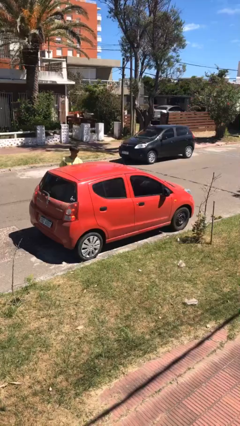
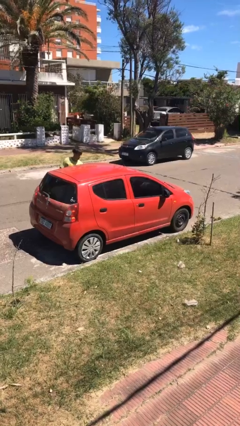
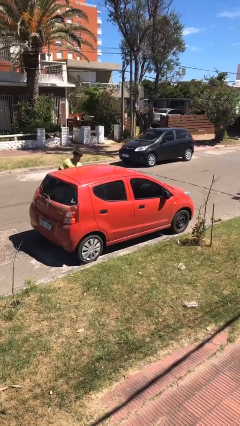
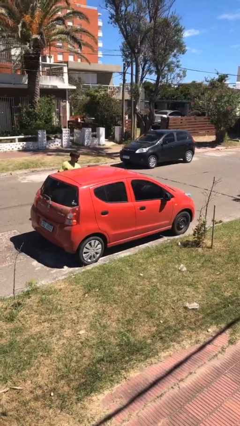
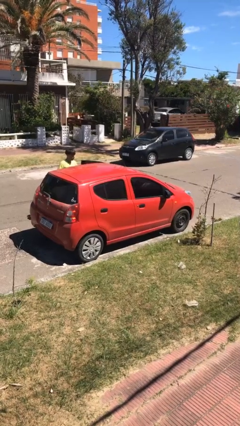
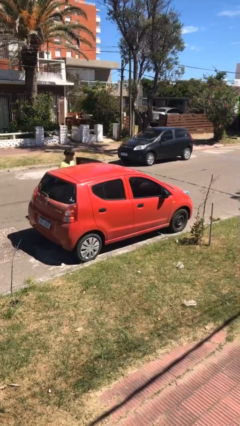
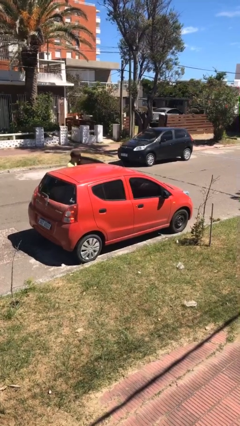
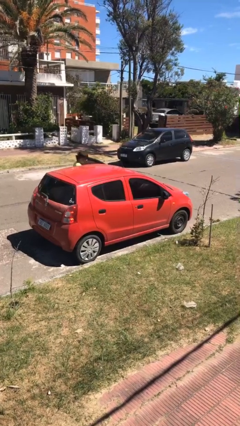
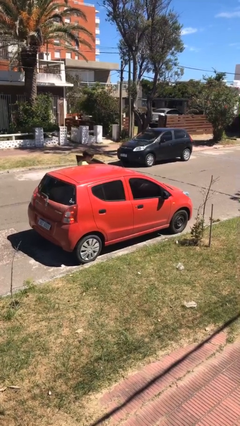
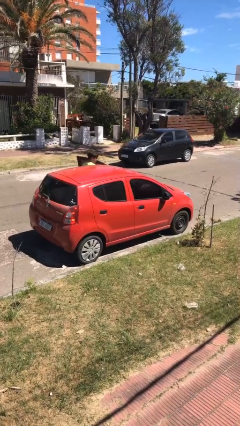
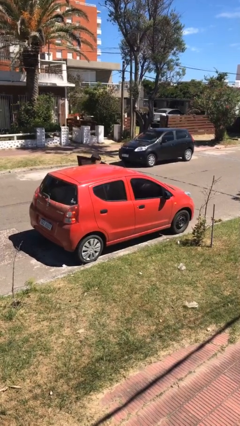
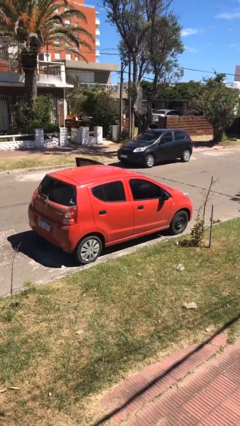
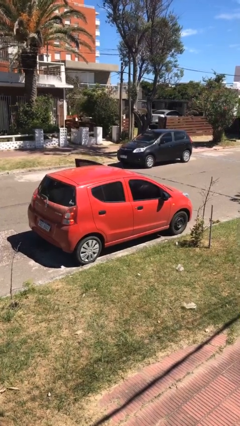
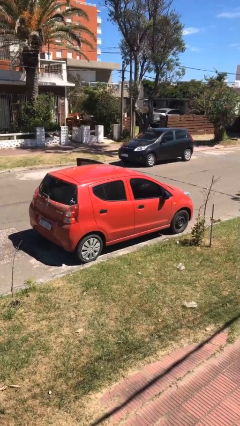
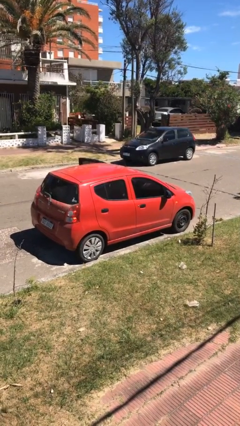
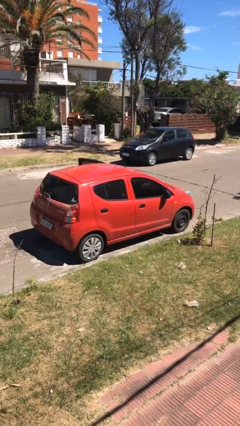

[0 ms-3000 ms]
car picks up person

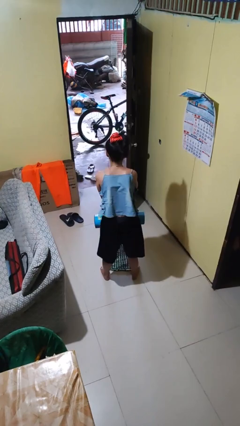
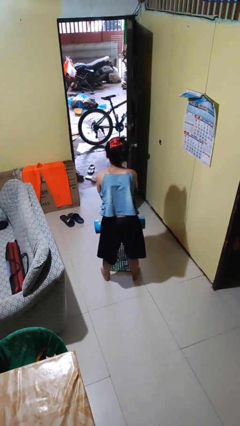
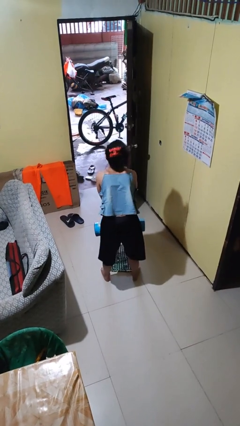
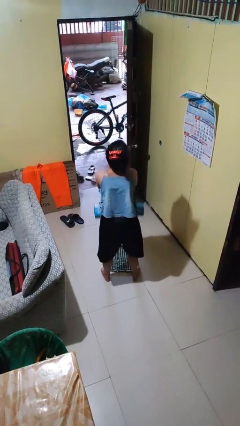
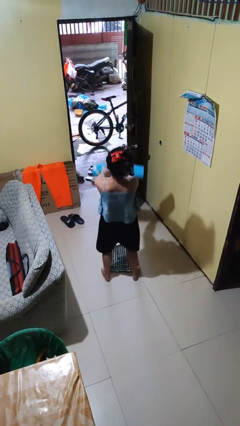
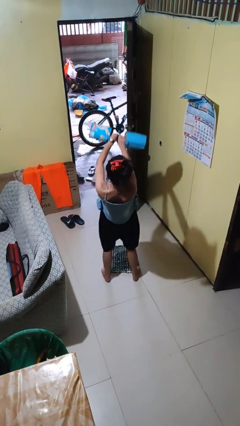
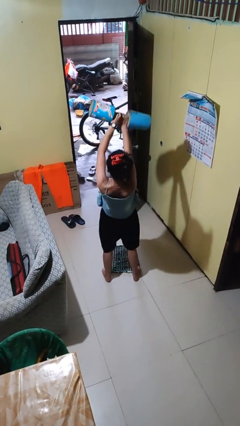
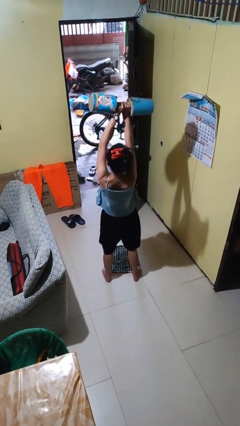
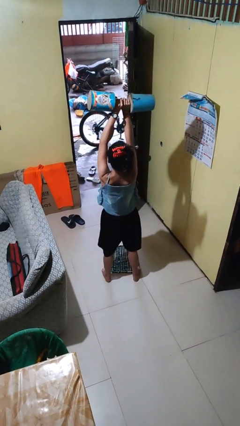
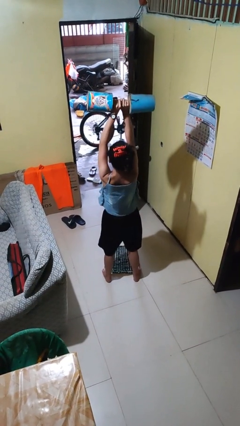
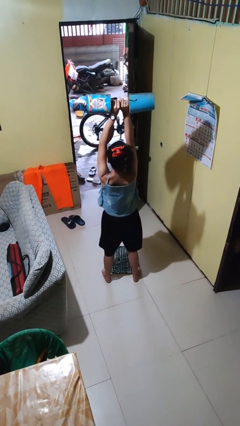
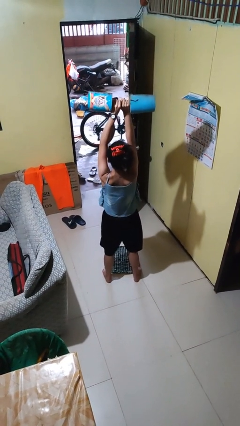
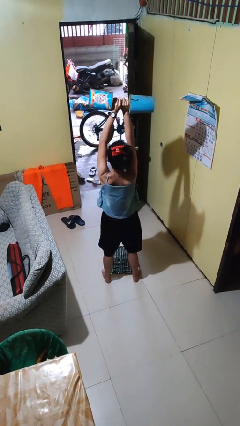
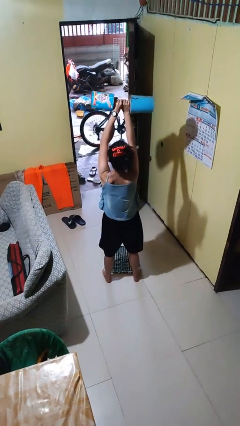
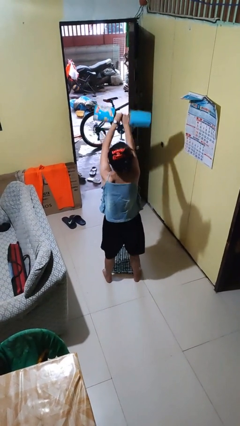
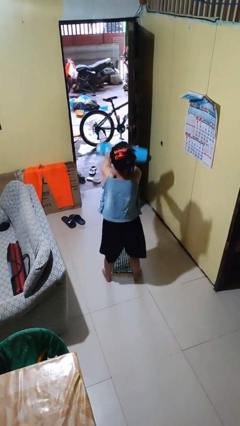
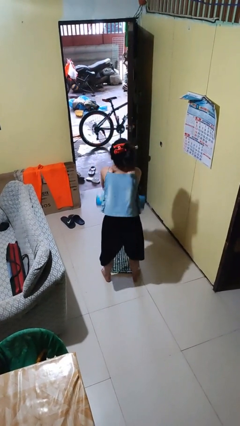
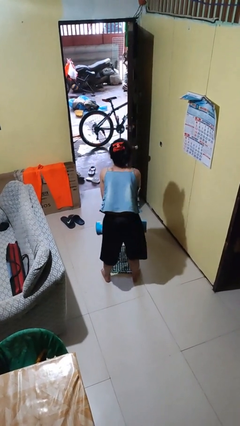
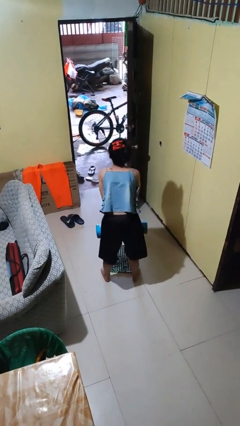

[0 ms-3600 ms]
person lifts dumbbells

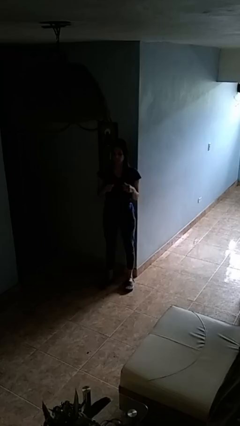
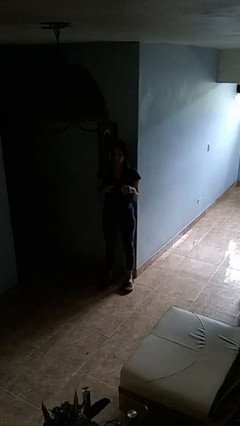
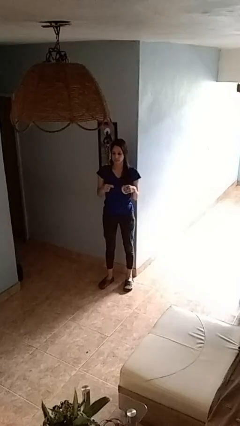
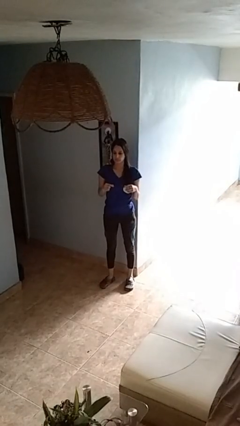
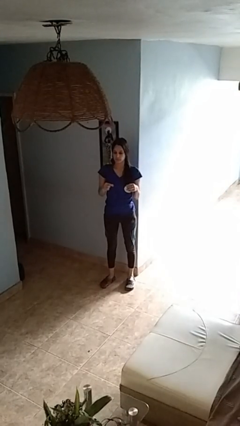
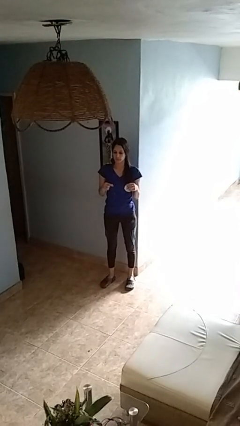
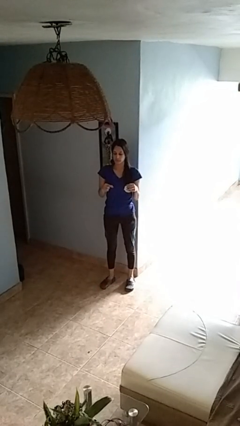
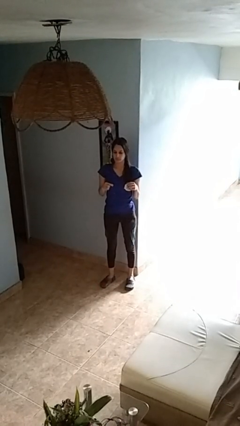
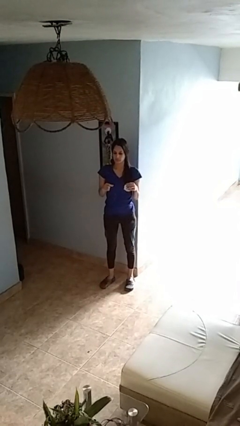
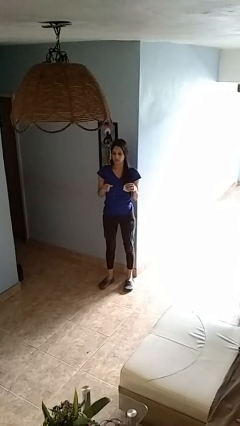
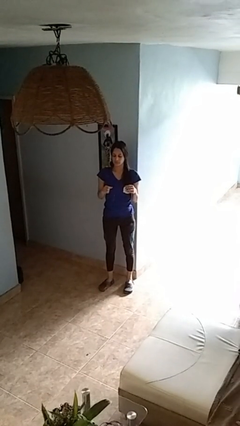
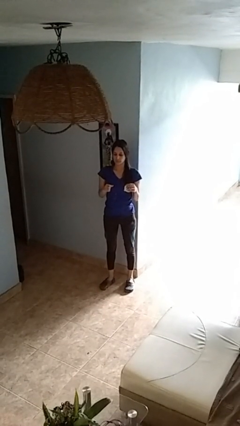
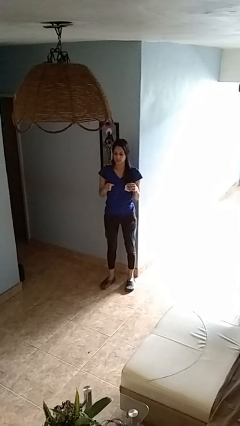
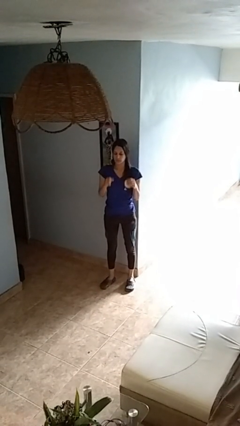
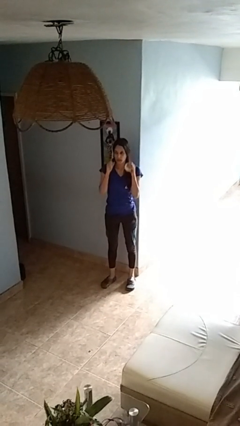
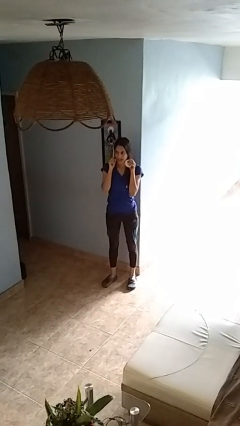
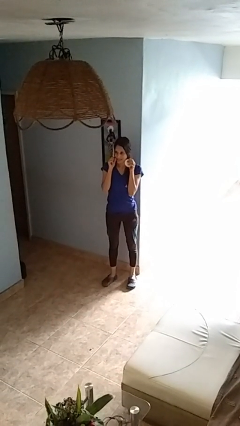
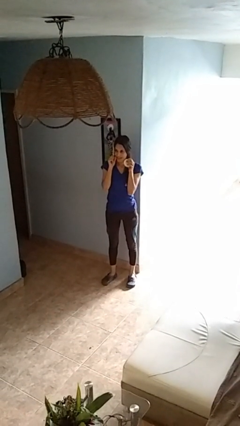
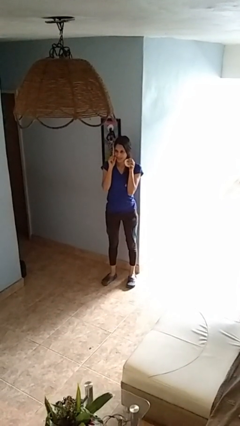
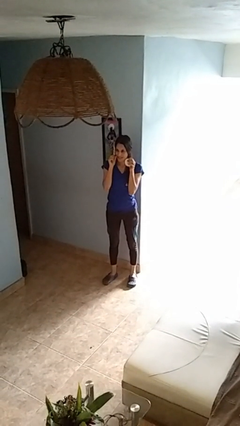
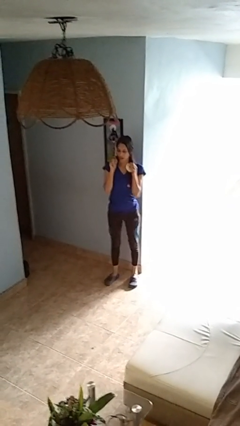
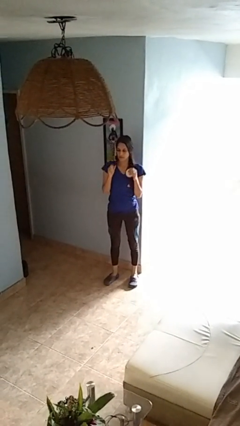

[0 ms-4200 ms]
person flosses

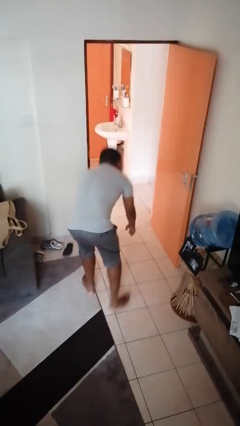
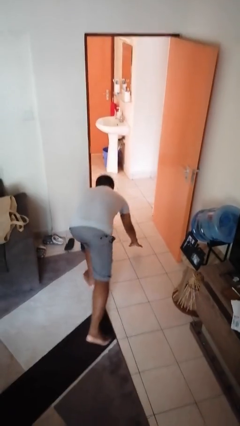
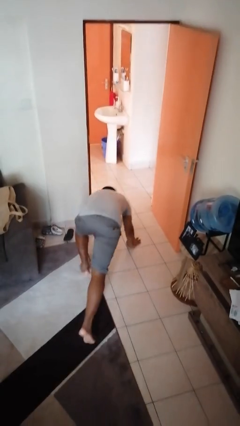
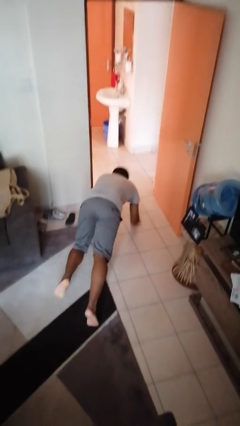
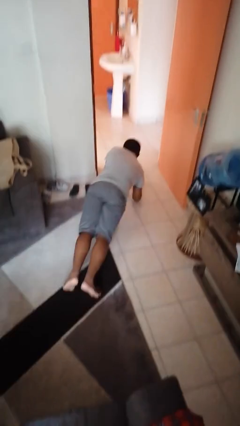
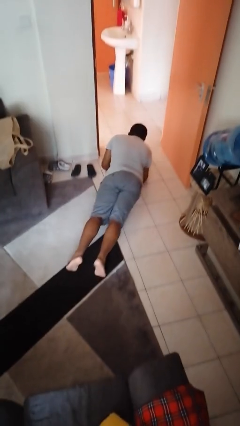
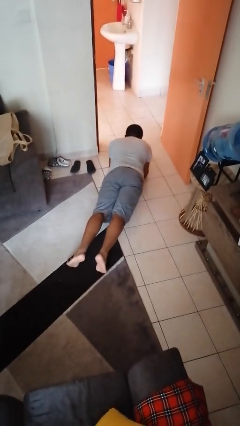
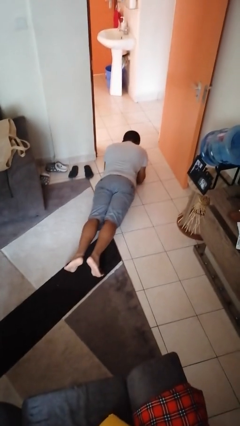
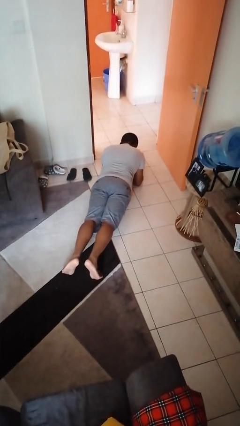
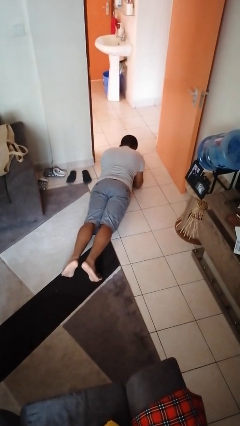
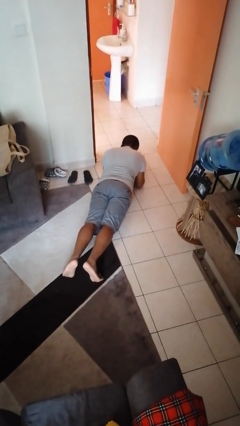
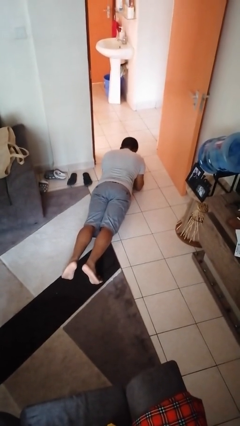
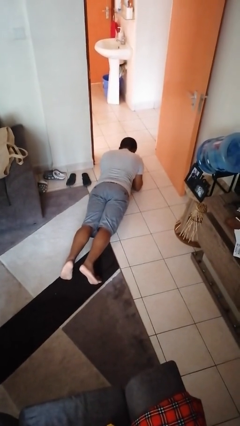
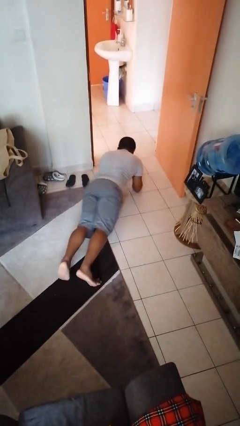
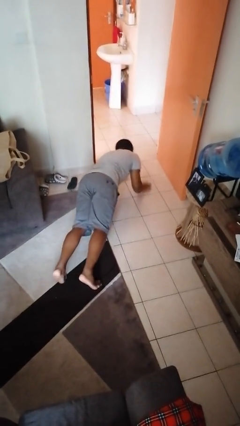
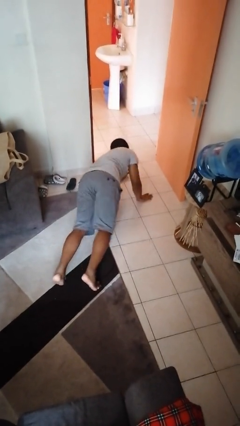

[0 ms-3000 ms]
person exercises with plank

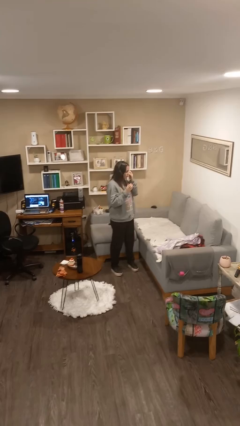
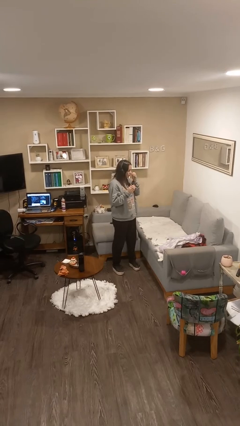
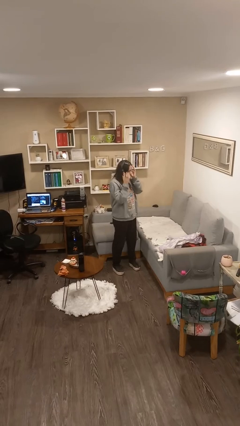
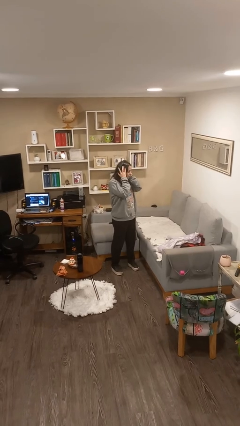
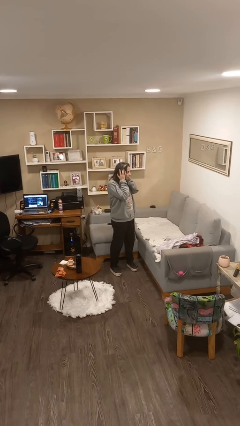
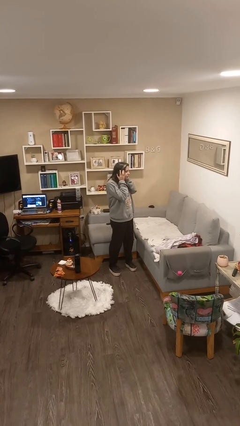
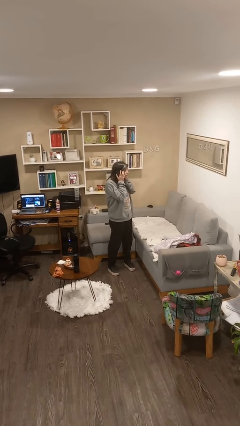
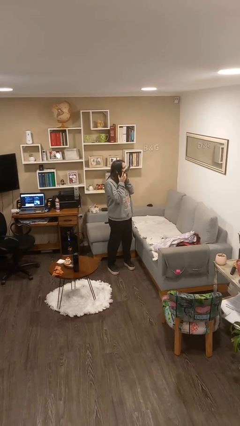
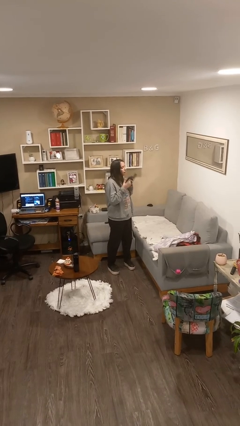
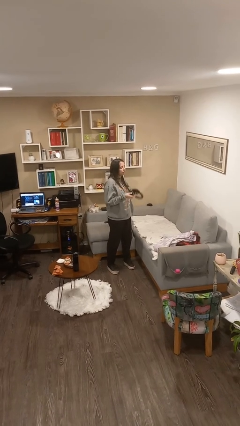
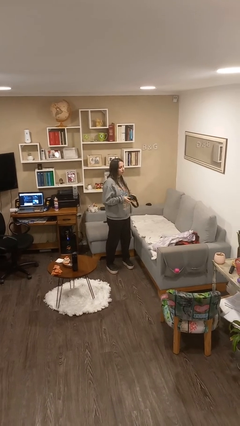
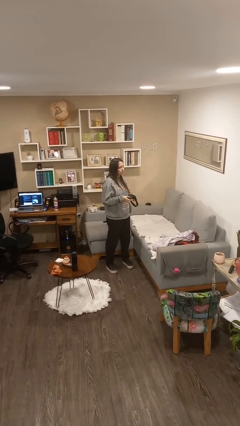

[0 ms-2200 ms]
person takes off headphones

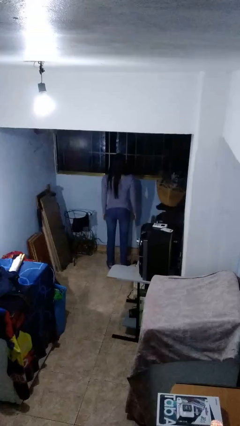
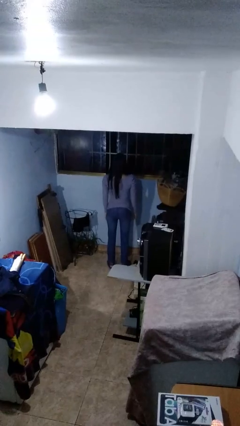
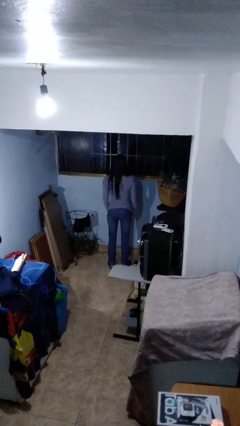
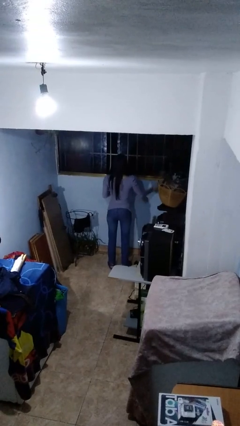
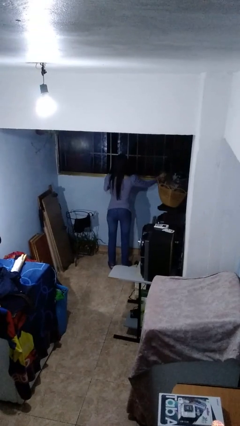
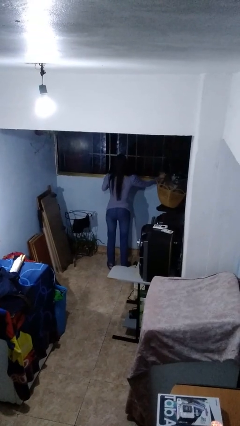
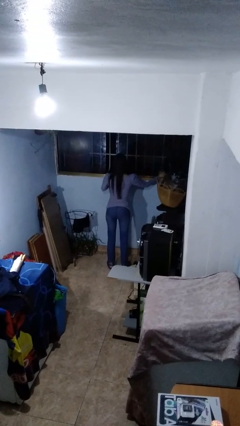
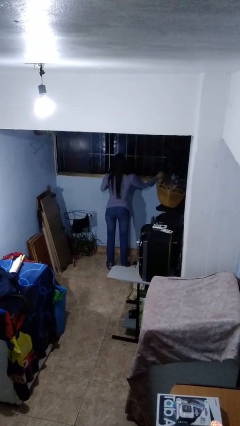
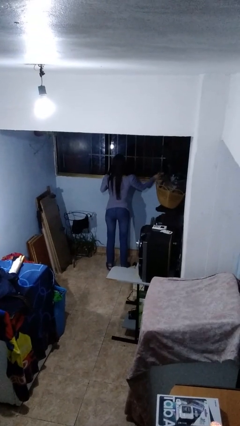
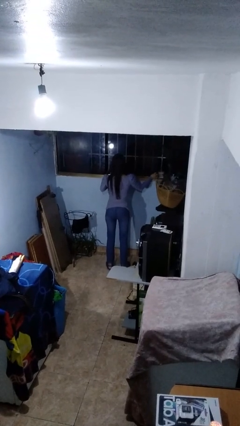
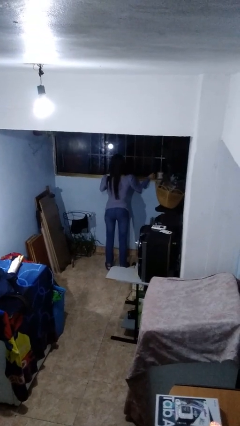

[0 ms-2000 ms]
person closes home window
